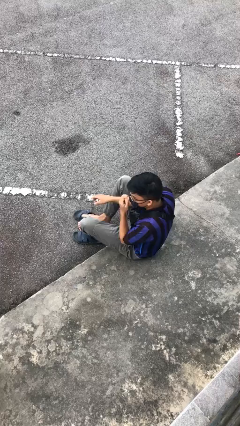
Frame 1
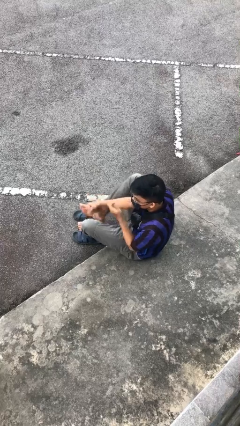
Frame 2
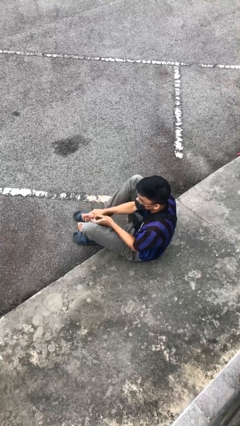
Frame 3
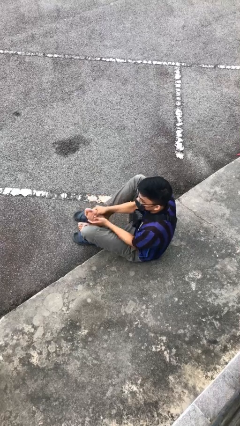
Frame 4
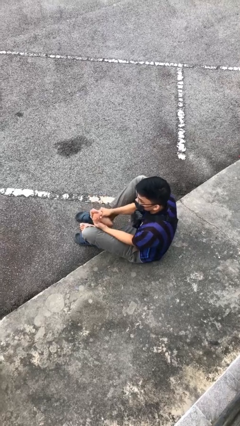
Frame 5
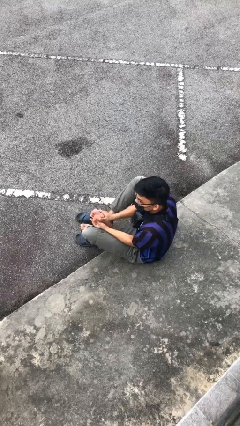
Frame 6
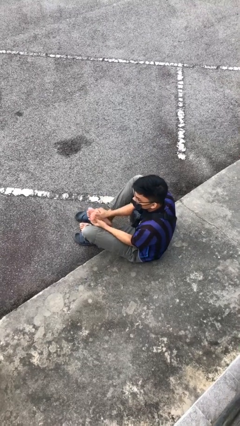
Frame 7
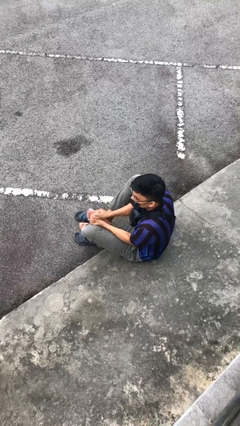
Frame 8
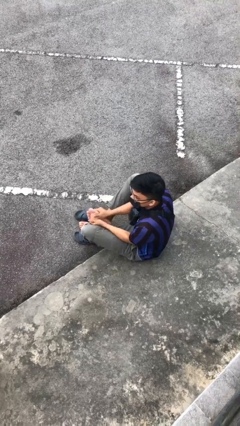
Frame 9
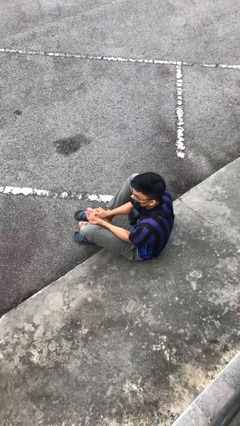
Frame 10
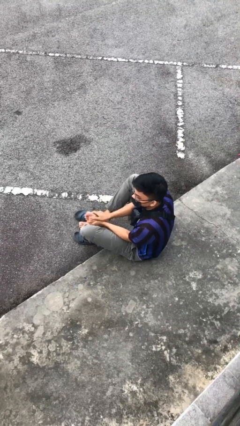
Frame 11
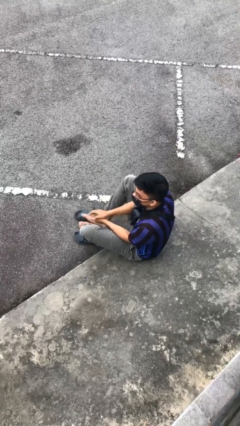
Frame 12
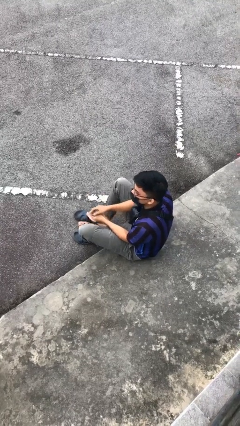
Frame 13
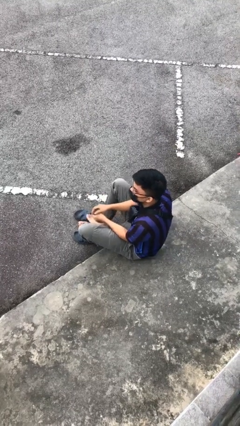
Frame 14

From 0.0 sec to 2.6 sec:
person rubs foot

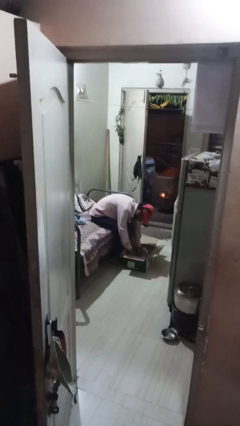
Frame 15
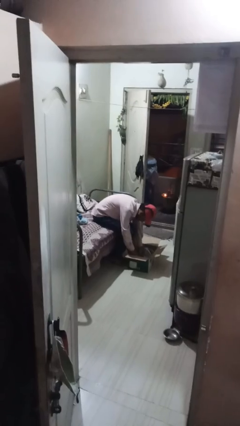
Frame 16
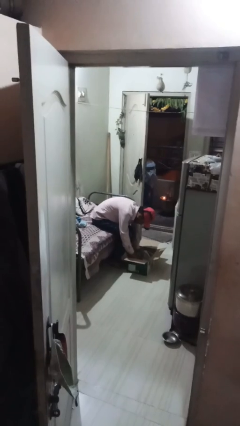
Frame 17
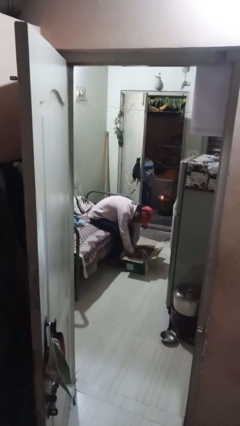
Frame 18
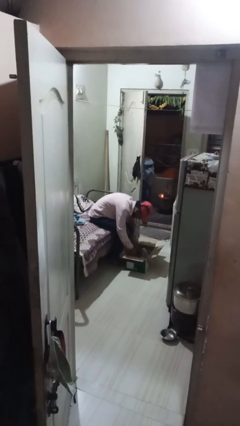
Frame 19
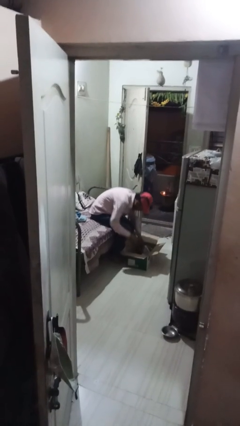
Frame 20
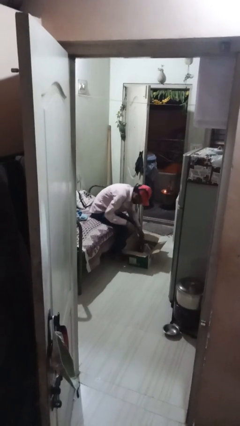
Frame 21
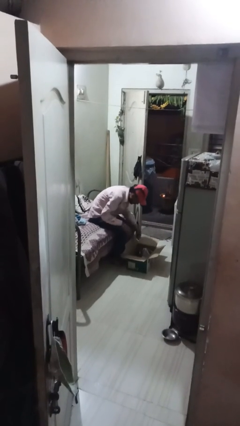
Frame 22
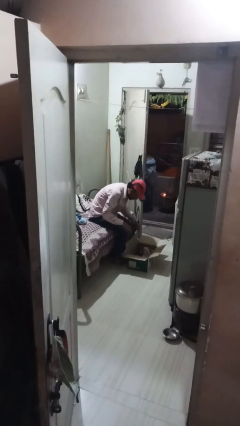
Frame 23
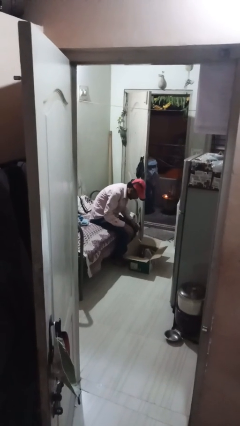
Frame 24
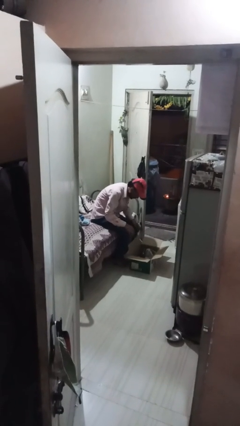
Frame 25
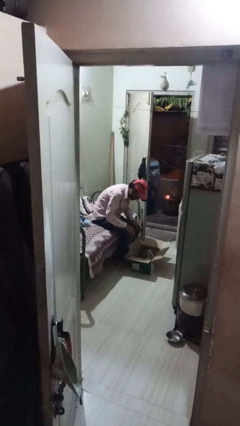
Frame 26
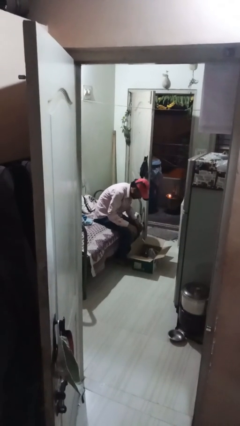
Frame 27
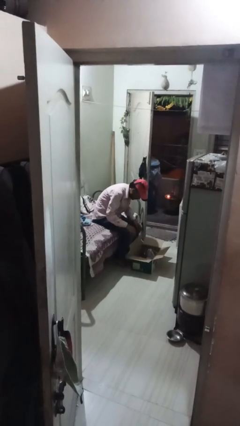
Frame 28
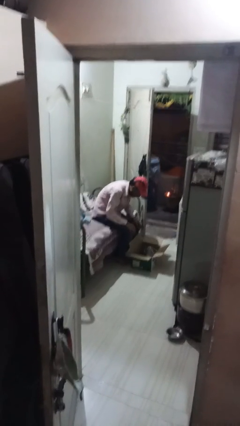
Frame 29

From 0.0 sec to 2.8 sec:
person searches in box

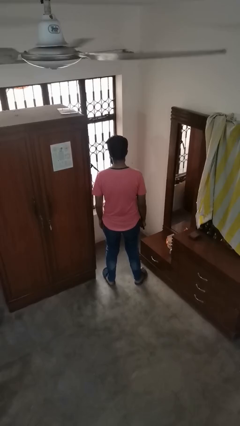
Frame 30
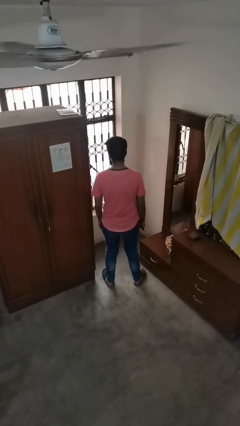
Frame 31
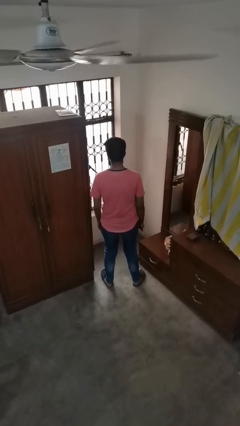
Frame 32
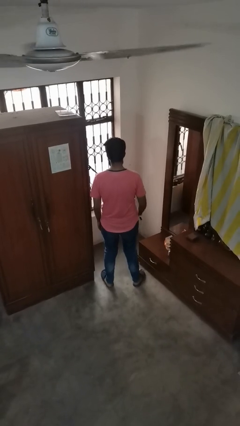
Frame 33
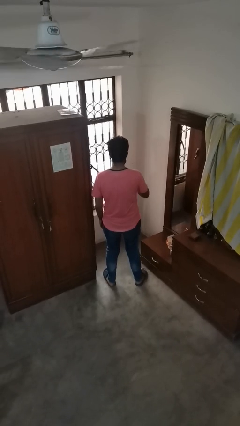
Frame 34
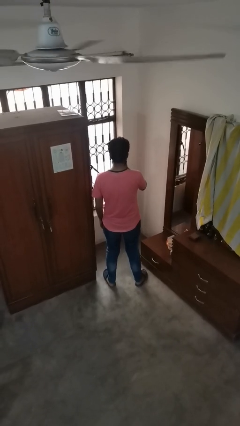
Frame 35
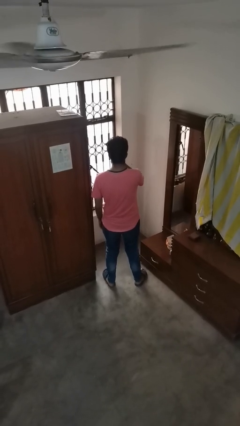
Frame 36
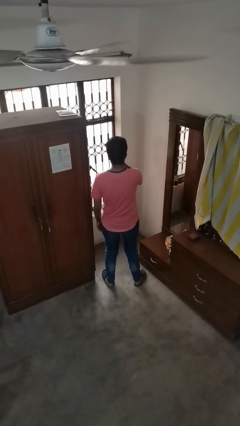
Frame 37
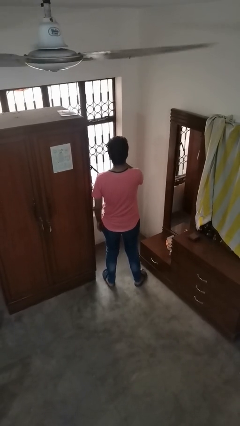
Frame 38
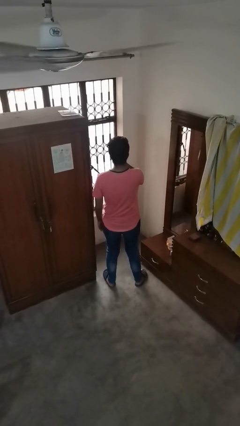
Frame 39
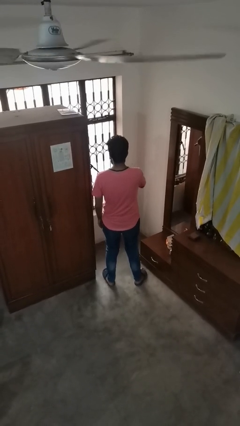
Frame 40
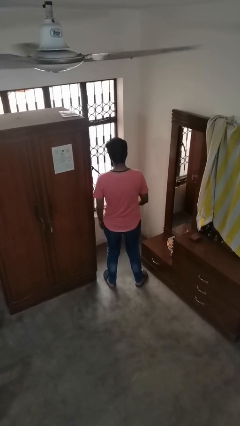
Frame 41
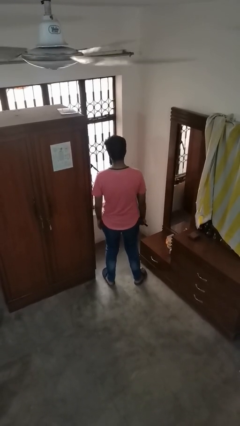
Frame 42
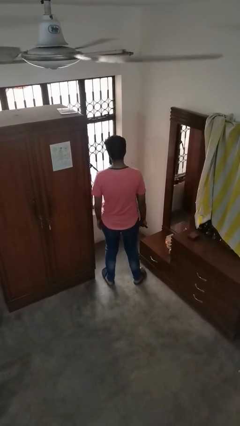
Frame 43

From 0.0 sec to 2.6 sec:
person vapes

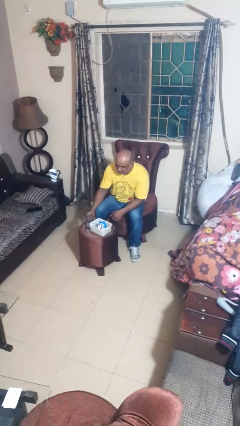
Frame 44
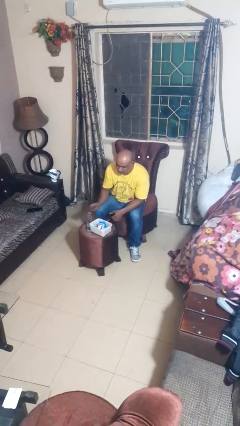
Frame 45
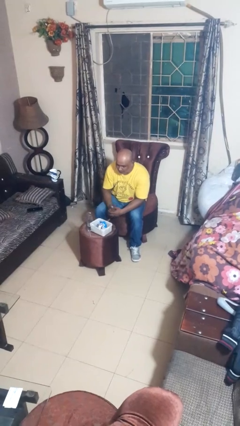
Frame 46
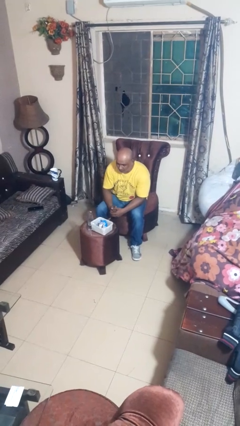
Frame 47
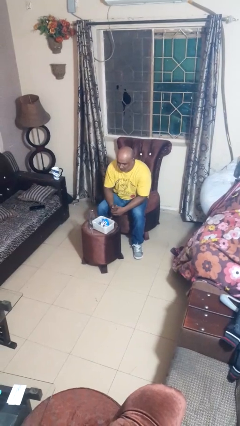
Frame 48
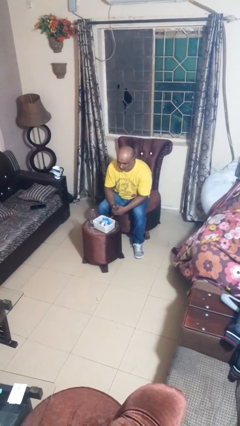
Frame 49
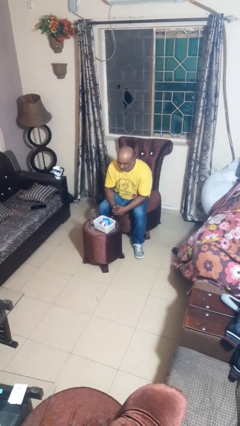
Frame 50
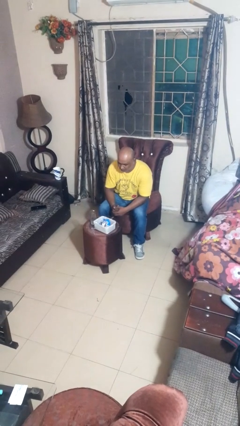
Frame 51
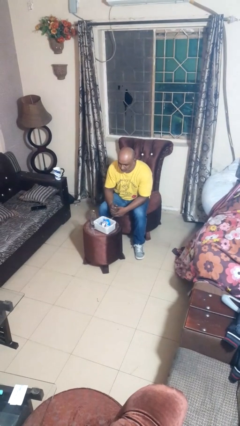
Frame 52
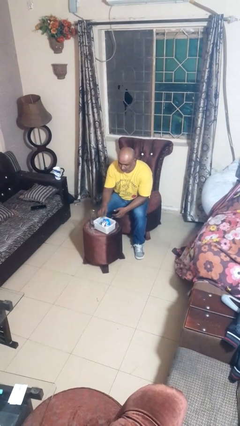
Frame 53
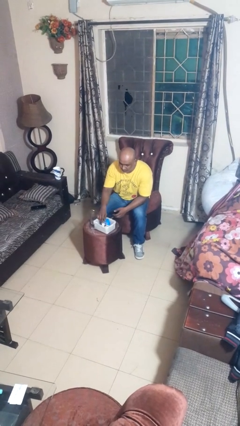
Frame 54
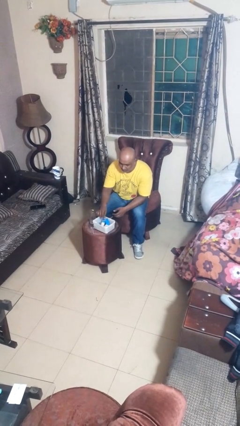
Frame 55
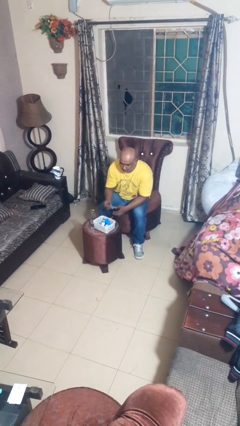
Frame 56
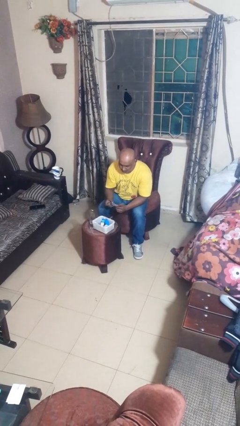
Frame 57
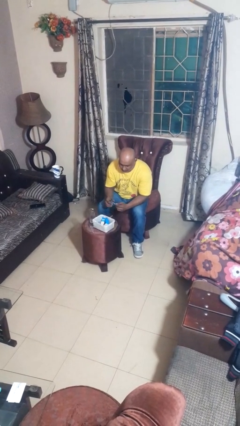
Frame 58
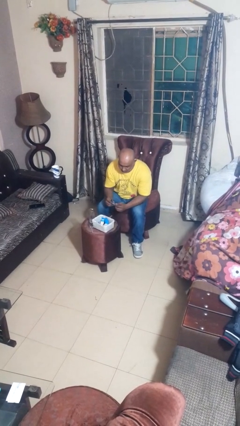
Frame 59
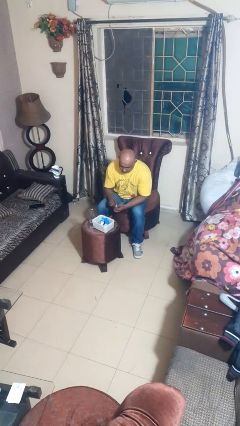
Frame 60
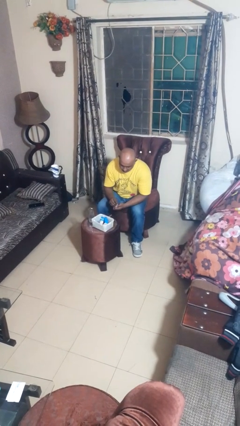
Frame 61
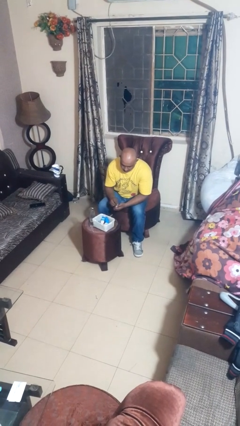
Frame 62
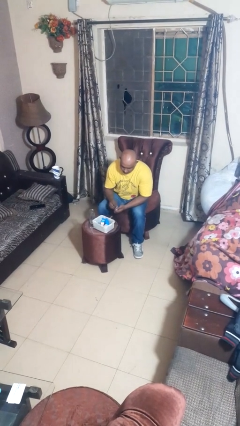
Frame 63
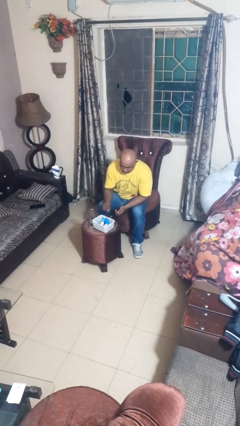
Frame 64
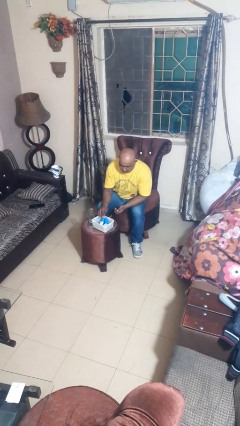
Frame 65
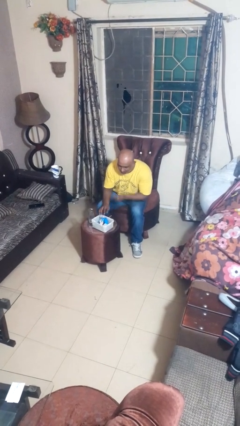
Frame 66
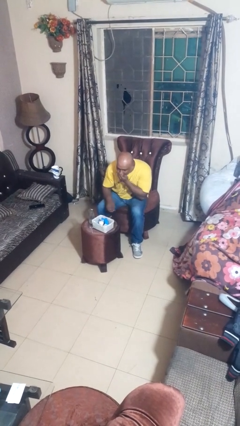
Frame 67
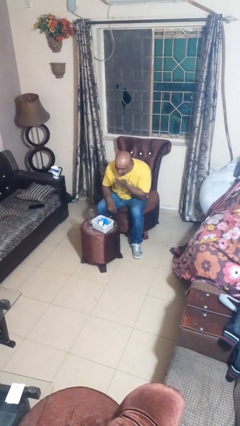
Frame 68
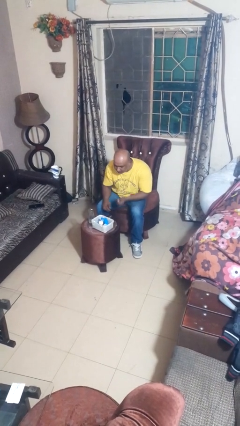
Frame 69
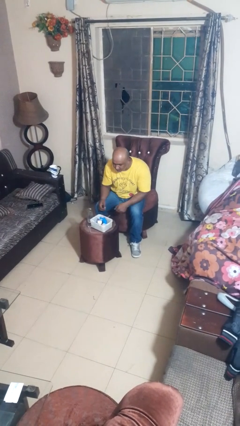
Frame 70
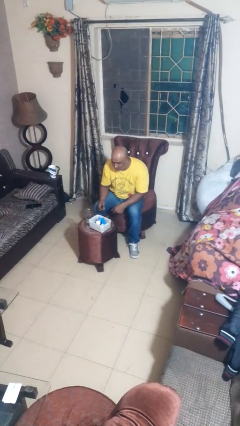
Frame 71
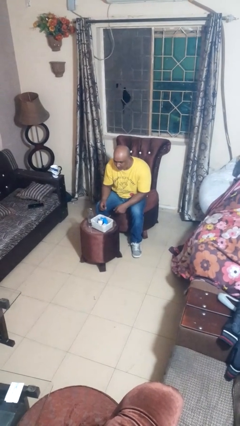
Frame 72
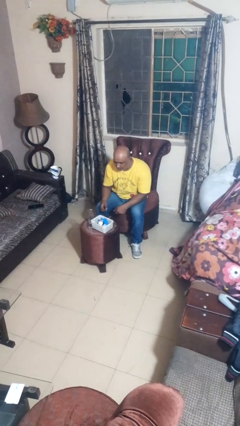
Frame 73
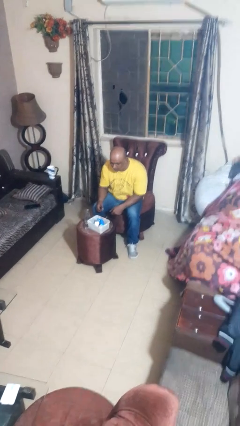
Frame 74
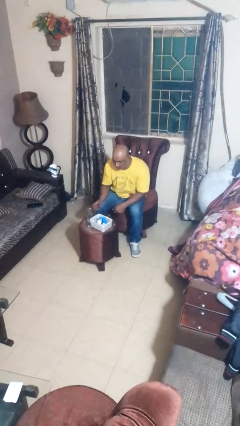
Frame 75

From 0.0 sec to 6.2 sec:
person takes medicine pills

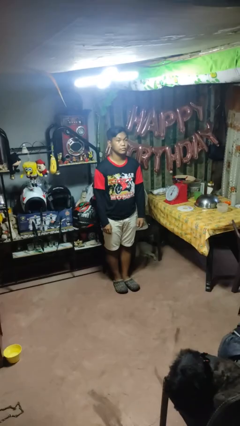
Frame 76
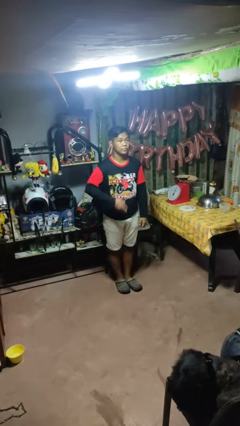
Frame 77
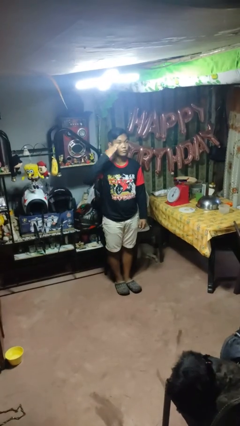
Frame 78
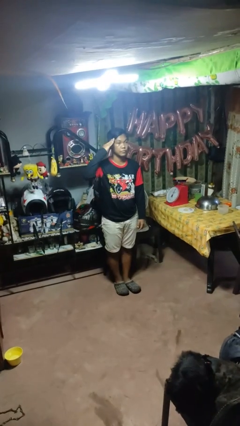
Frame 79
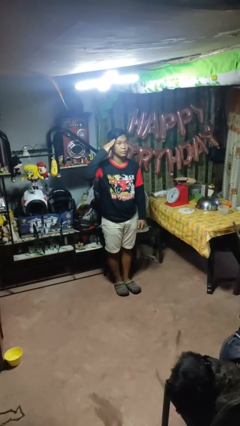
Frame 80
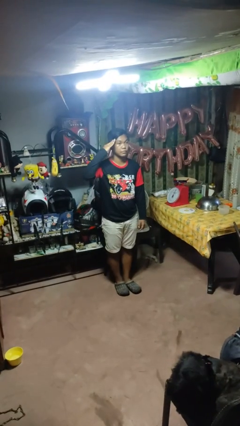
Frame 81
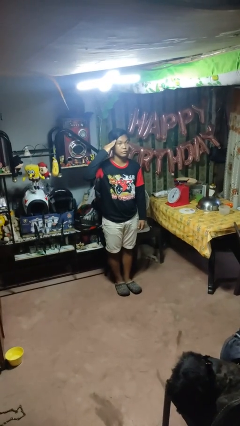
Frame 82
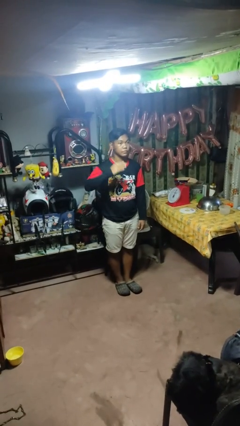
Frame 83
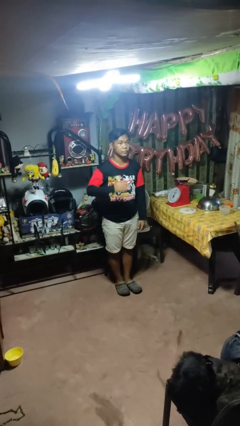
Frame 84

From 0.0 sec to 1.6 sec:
person salutes

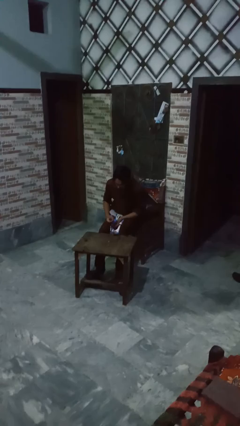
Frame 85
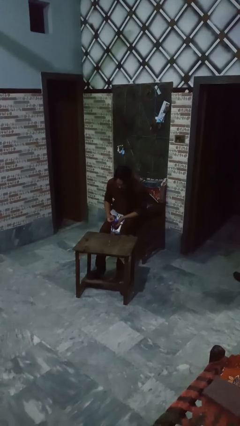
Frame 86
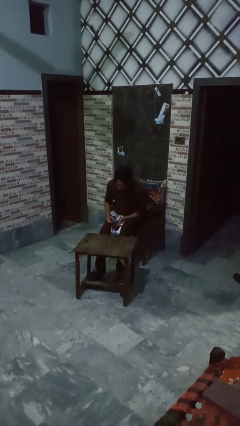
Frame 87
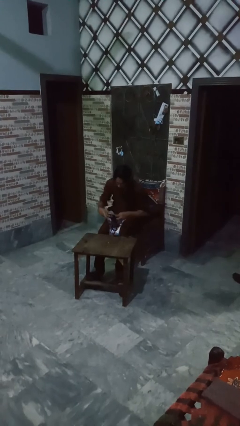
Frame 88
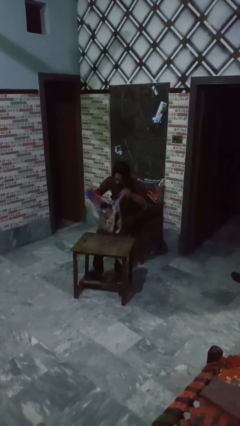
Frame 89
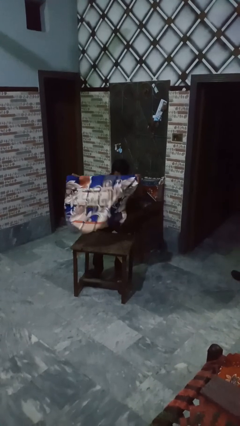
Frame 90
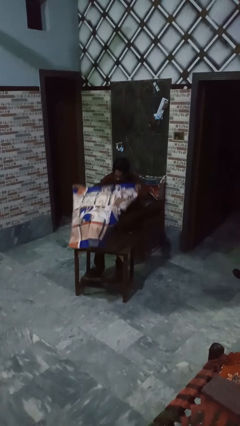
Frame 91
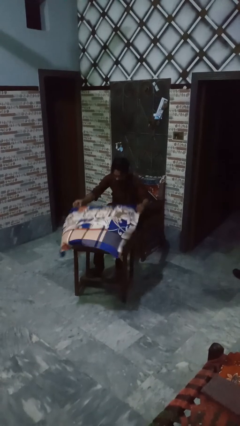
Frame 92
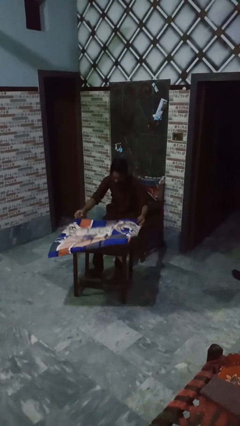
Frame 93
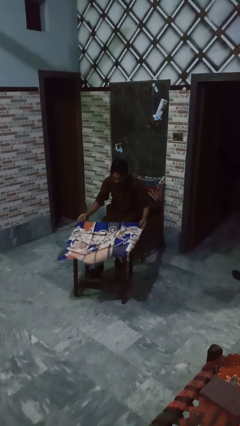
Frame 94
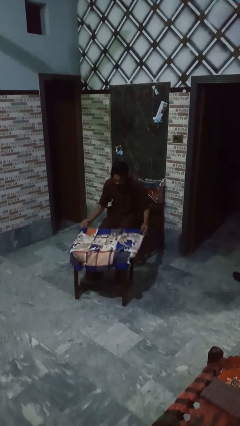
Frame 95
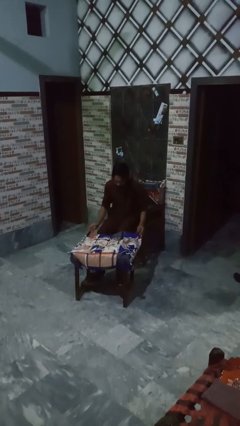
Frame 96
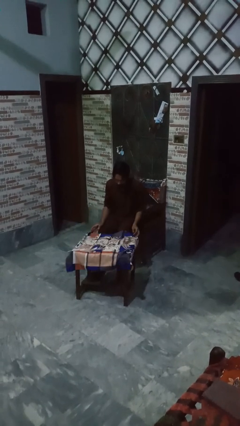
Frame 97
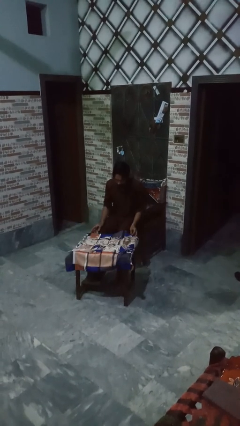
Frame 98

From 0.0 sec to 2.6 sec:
person spreads tablecloth
